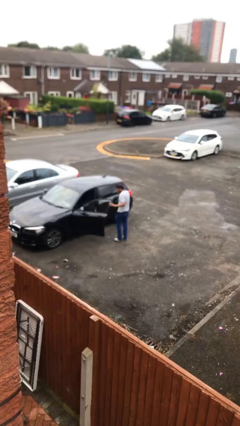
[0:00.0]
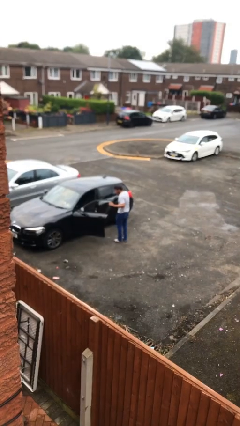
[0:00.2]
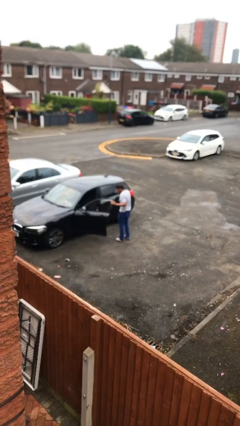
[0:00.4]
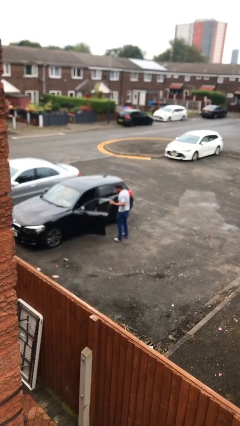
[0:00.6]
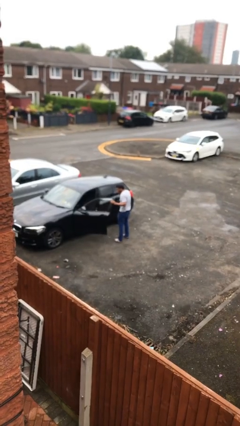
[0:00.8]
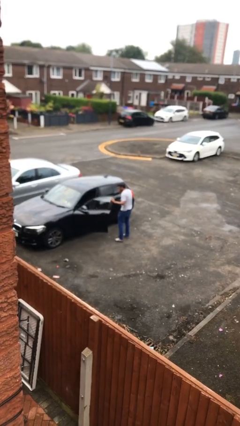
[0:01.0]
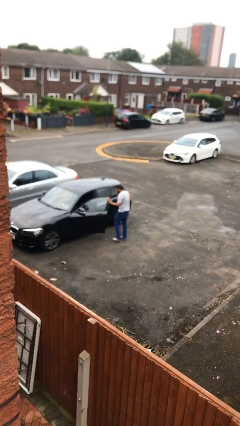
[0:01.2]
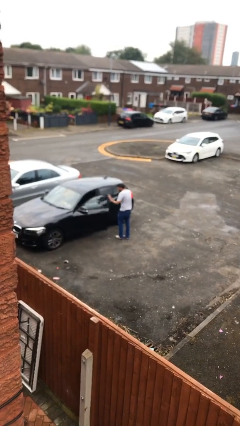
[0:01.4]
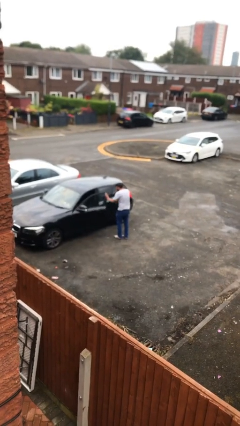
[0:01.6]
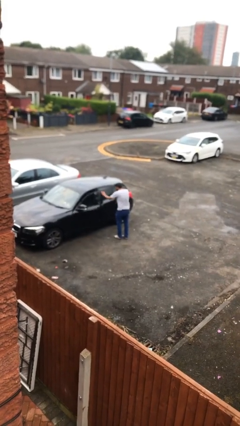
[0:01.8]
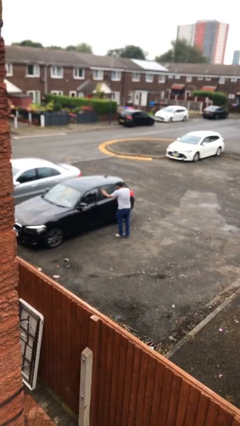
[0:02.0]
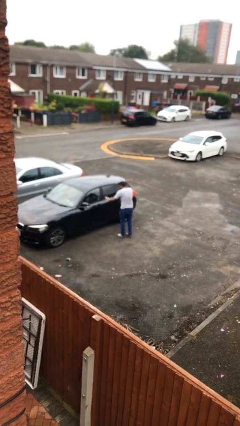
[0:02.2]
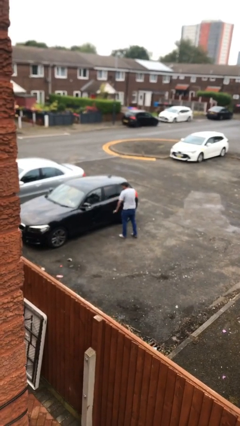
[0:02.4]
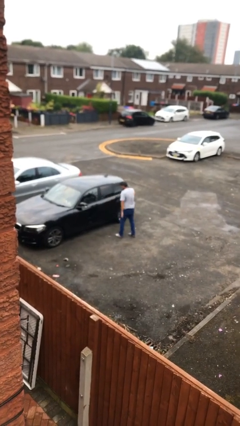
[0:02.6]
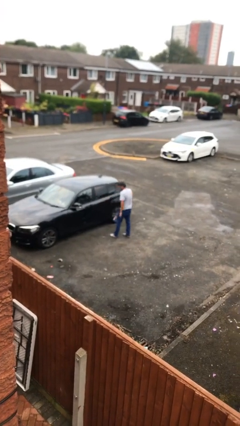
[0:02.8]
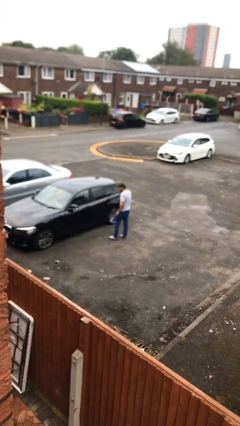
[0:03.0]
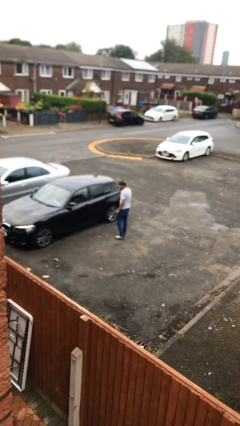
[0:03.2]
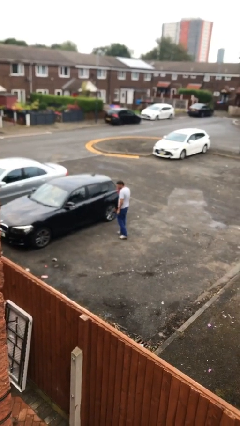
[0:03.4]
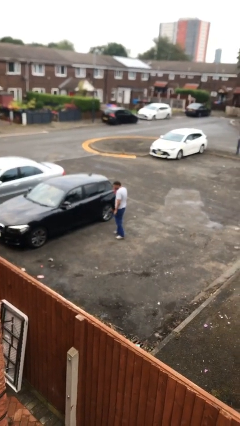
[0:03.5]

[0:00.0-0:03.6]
person closes car door

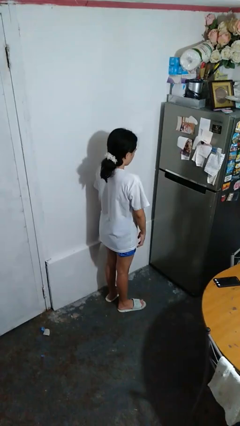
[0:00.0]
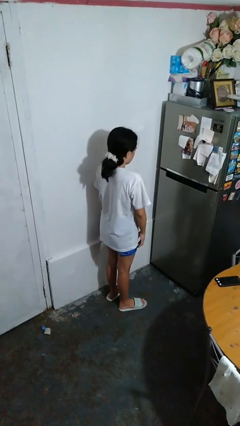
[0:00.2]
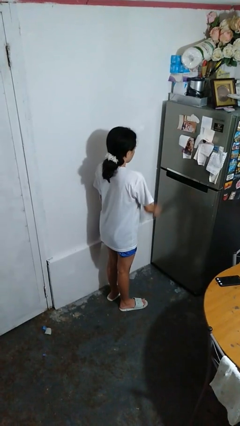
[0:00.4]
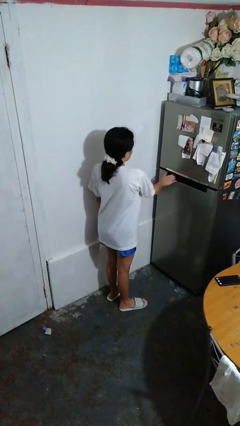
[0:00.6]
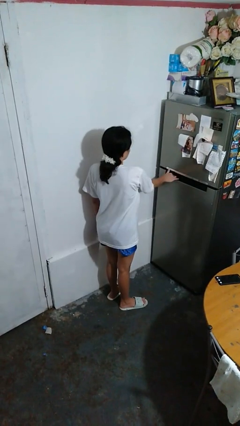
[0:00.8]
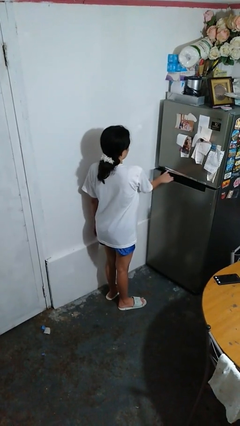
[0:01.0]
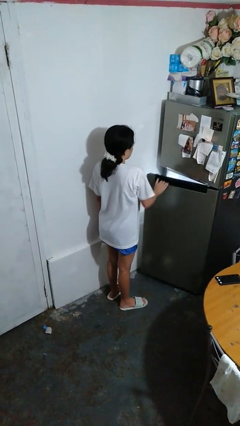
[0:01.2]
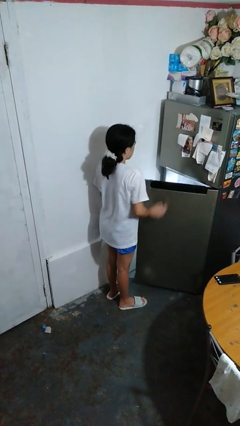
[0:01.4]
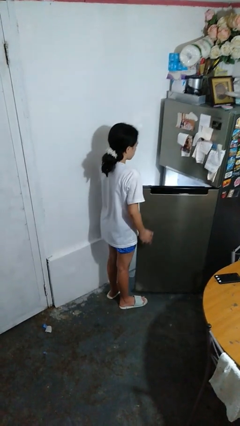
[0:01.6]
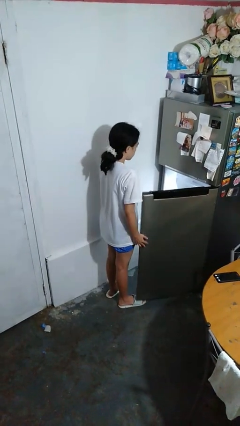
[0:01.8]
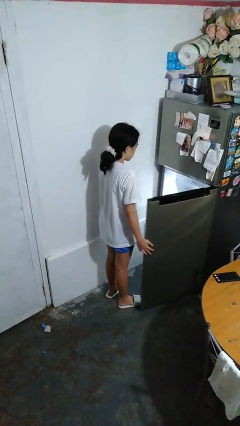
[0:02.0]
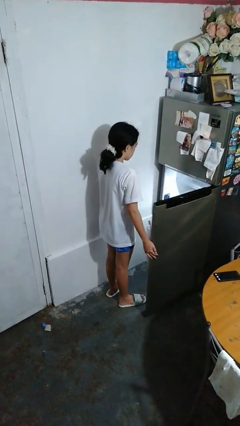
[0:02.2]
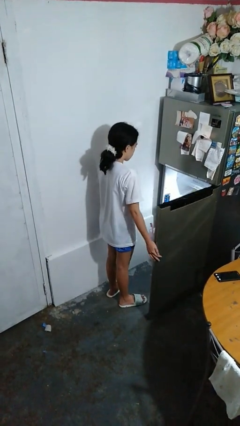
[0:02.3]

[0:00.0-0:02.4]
person opens refrigerator

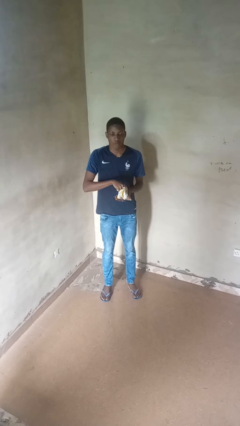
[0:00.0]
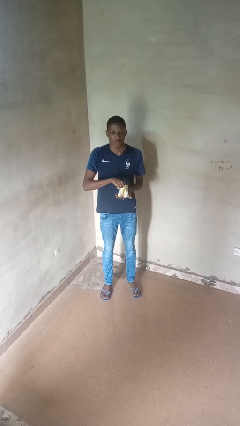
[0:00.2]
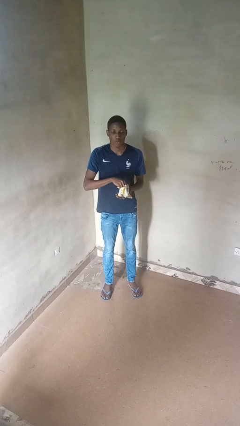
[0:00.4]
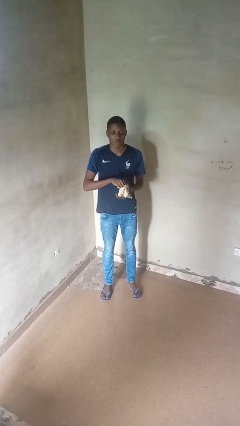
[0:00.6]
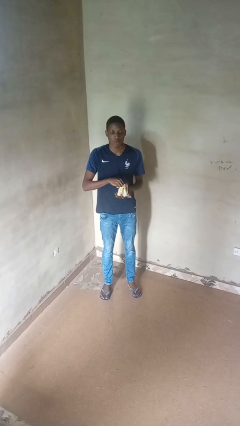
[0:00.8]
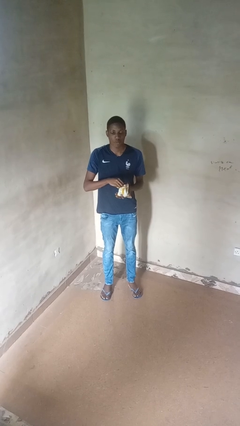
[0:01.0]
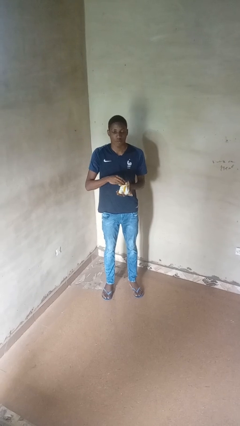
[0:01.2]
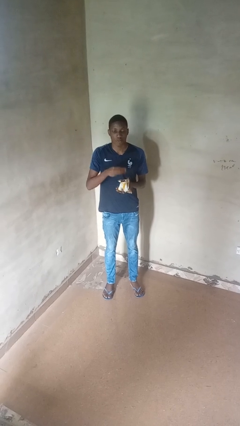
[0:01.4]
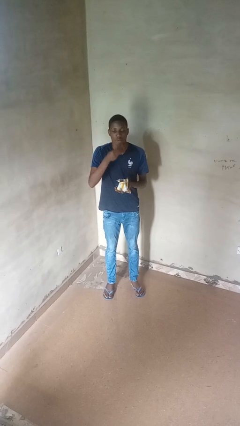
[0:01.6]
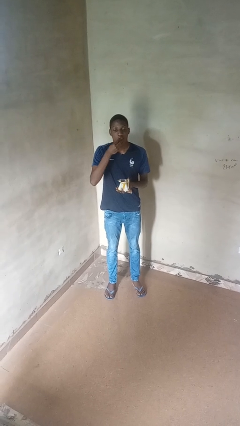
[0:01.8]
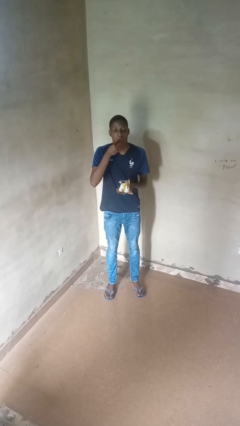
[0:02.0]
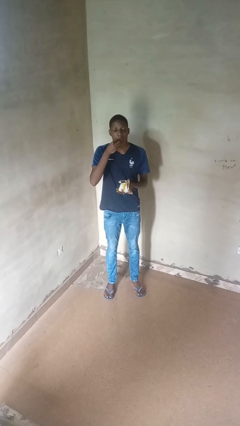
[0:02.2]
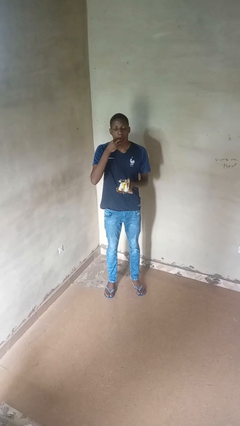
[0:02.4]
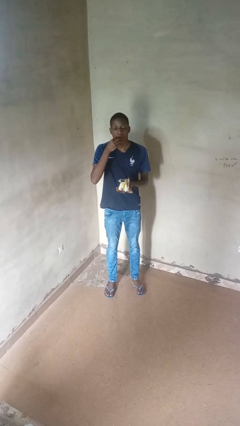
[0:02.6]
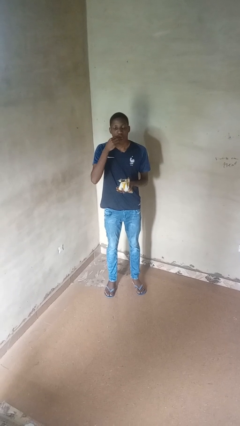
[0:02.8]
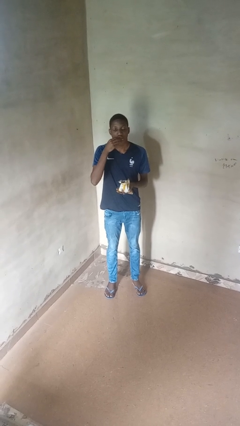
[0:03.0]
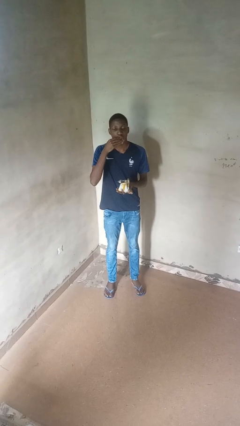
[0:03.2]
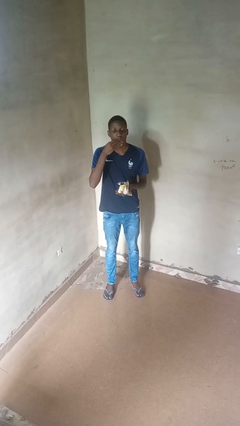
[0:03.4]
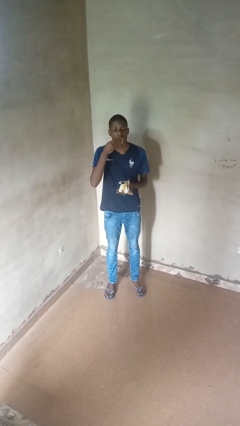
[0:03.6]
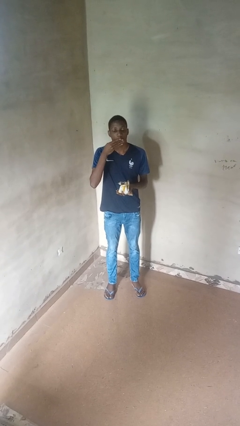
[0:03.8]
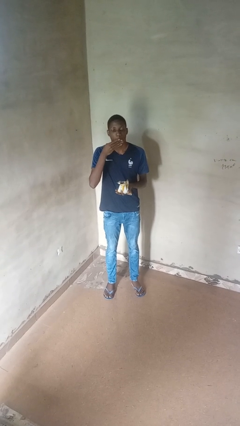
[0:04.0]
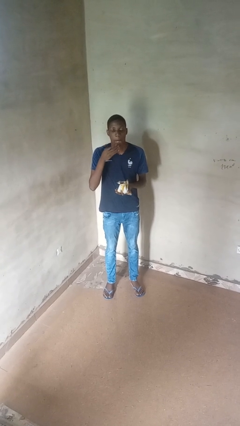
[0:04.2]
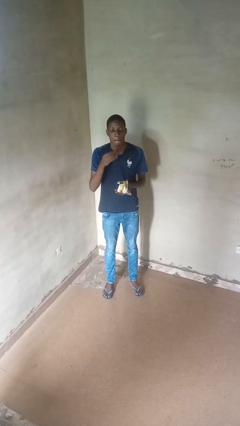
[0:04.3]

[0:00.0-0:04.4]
person eats snack from bag

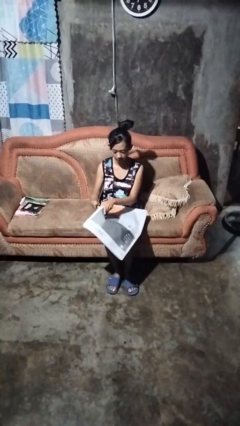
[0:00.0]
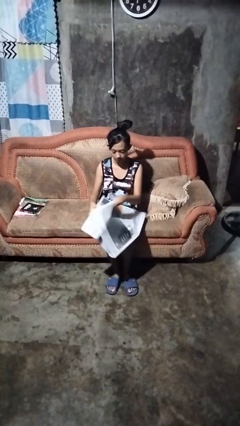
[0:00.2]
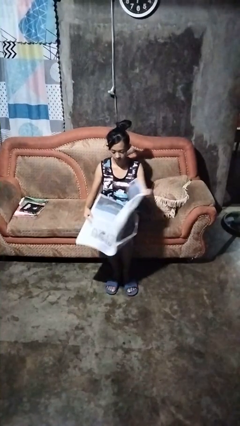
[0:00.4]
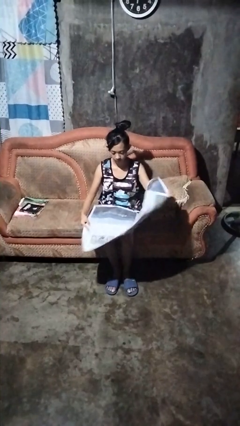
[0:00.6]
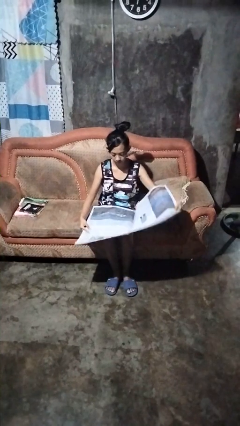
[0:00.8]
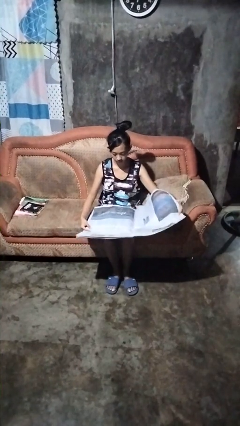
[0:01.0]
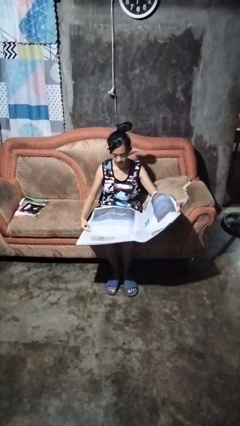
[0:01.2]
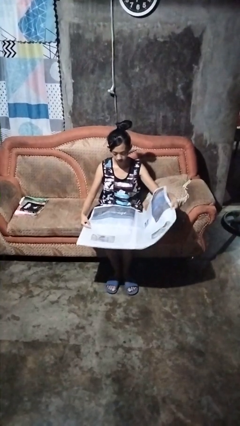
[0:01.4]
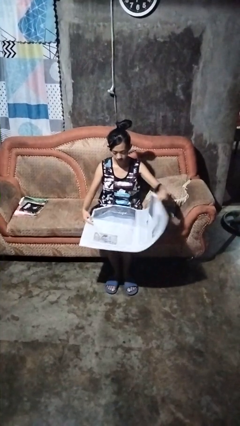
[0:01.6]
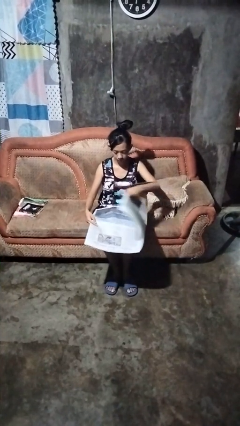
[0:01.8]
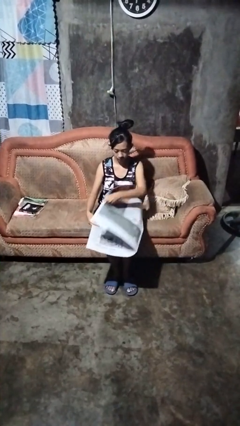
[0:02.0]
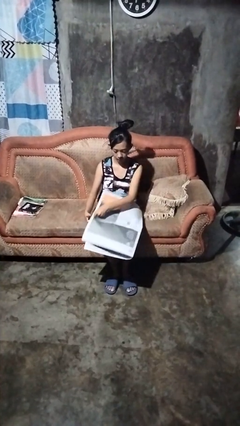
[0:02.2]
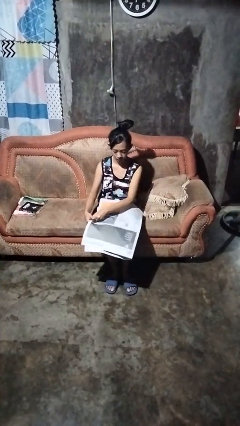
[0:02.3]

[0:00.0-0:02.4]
person reads newspaper

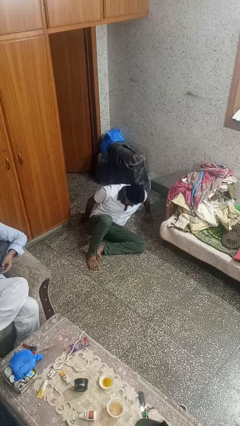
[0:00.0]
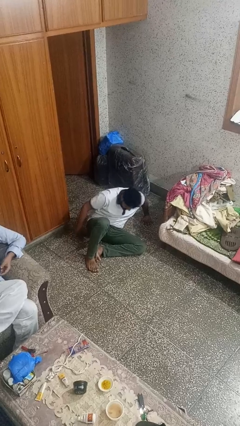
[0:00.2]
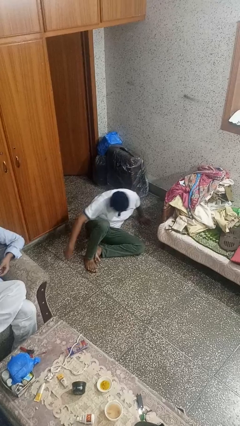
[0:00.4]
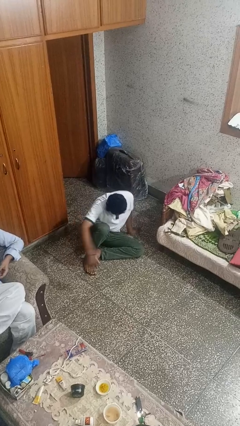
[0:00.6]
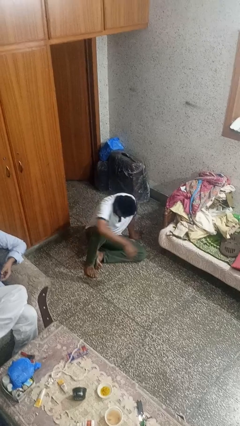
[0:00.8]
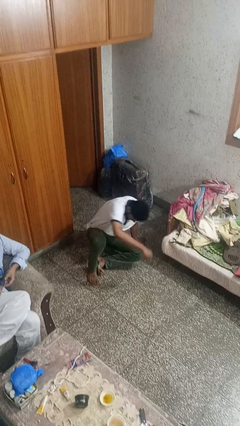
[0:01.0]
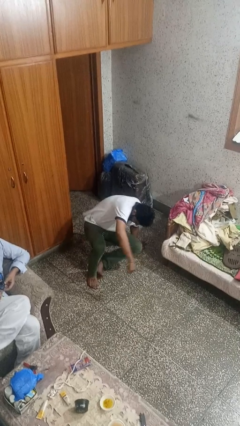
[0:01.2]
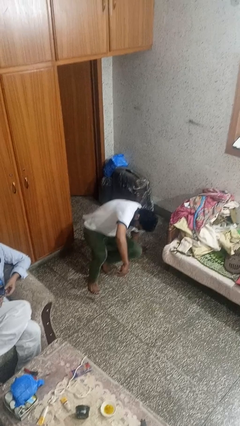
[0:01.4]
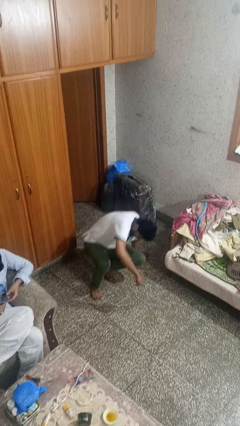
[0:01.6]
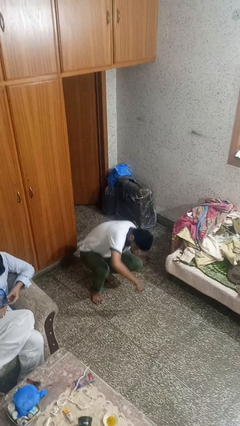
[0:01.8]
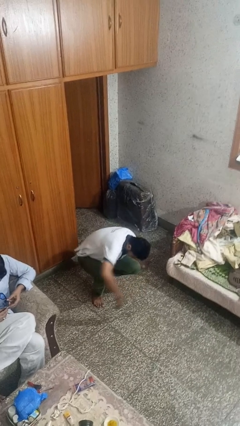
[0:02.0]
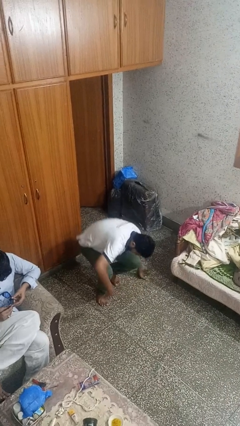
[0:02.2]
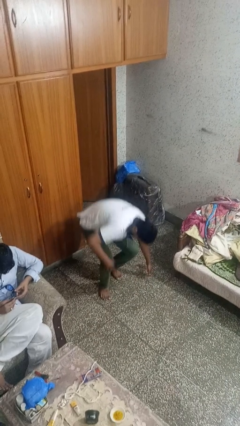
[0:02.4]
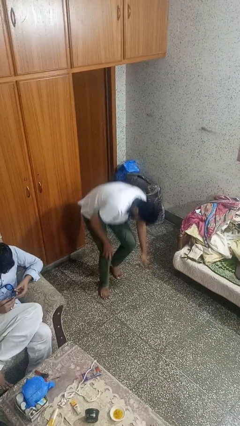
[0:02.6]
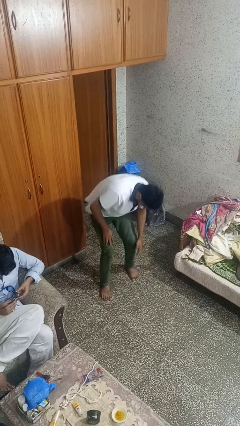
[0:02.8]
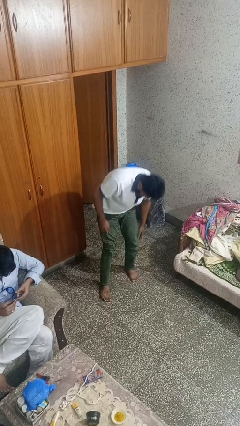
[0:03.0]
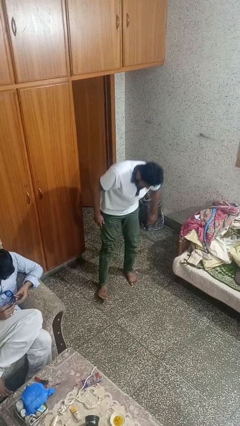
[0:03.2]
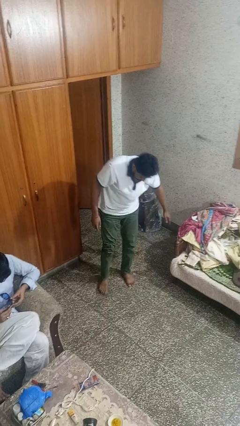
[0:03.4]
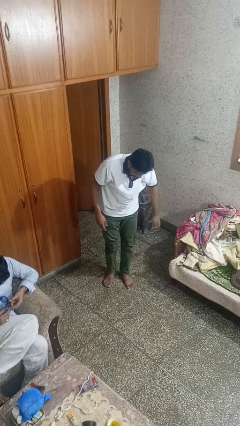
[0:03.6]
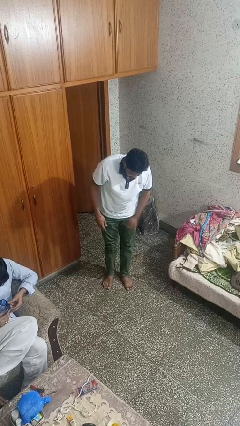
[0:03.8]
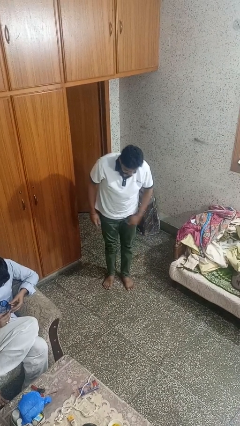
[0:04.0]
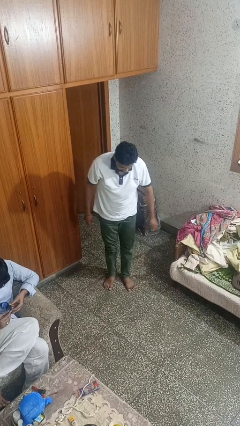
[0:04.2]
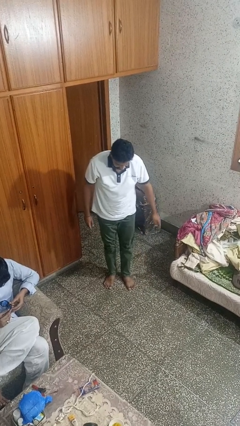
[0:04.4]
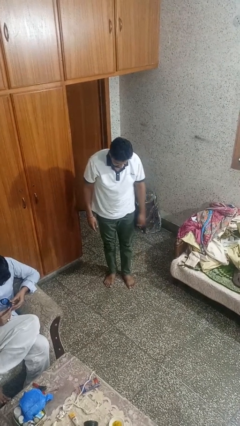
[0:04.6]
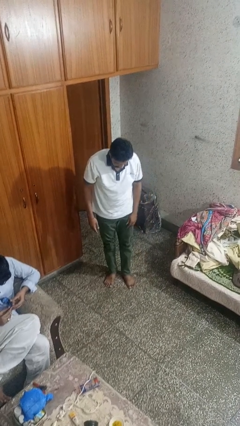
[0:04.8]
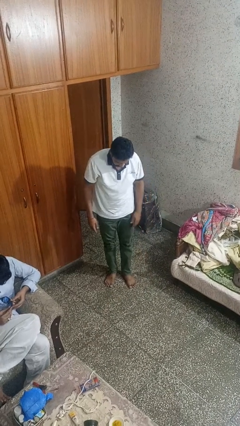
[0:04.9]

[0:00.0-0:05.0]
person stands up from floor
